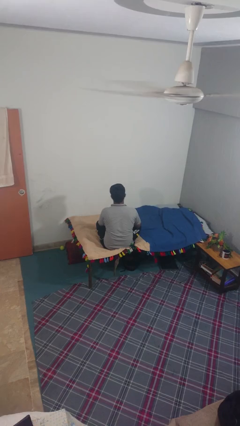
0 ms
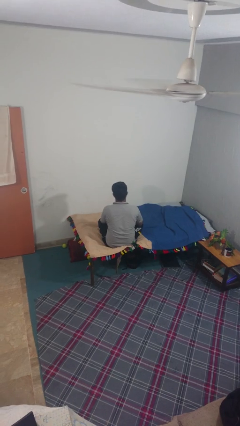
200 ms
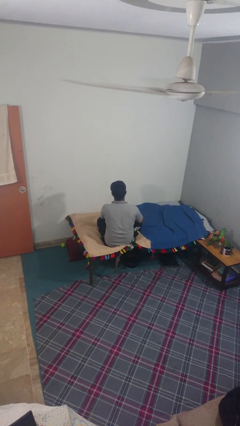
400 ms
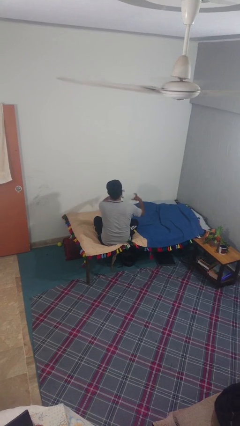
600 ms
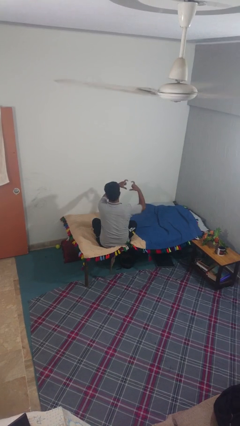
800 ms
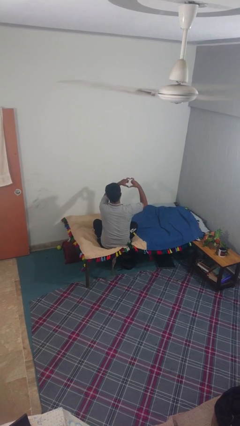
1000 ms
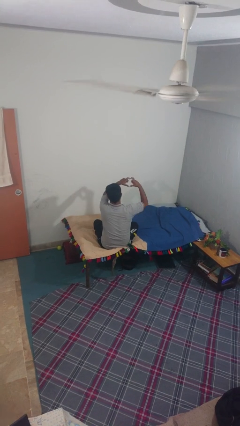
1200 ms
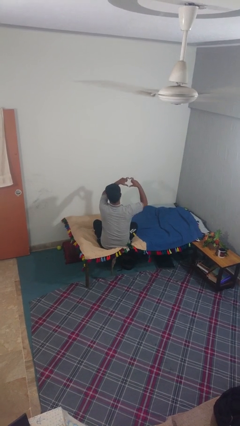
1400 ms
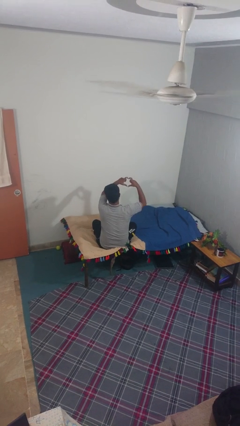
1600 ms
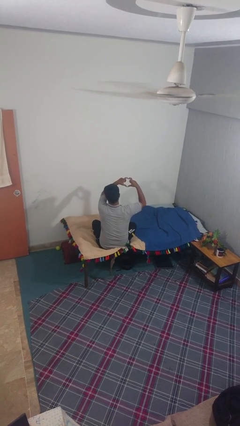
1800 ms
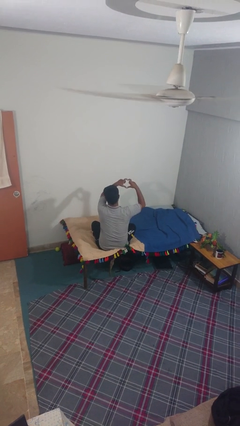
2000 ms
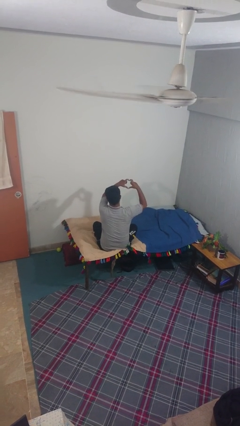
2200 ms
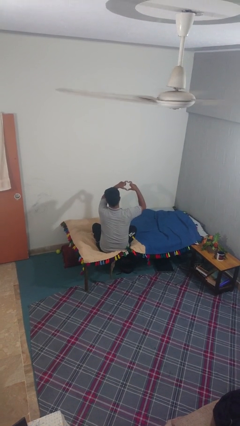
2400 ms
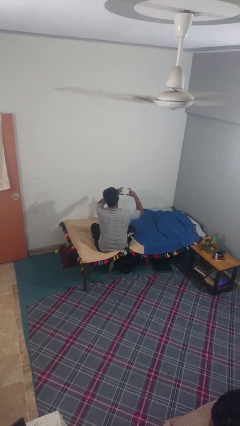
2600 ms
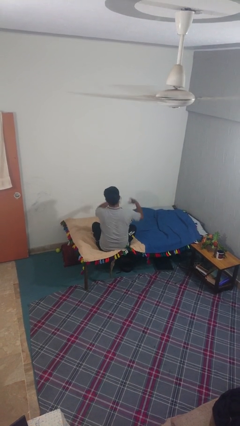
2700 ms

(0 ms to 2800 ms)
person gestures heart

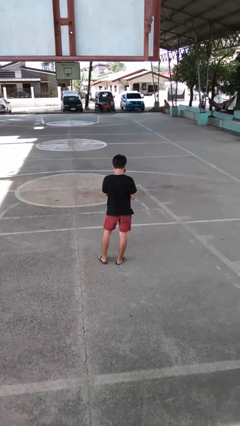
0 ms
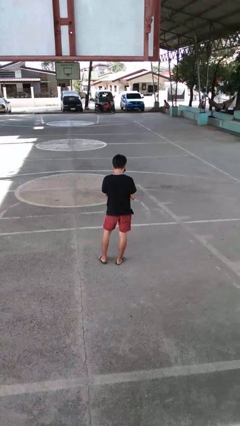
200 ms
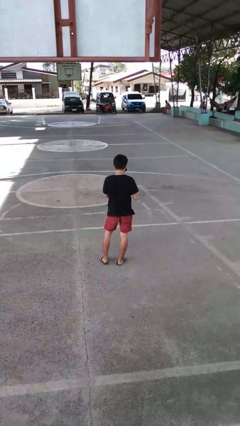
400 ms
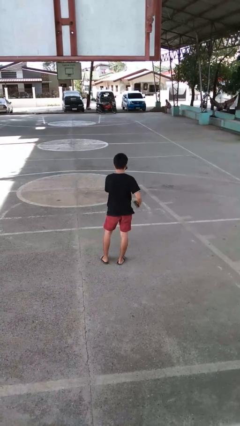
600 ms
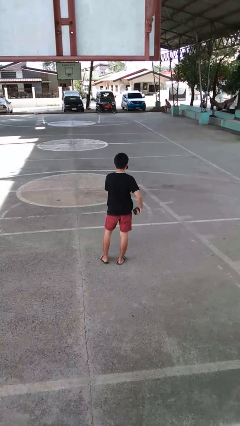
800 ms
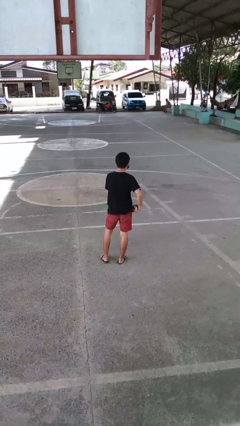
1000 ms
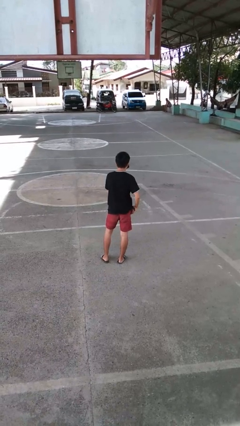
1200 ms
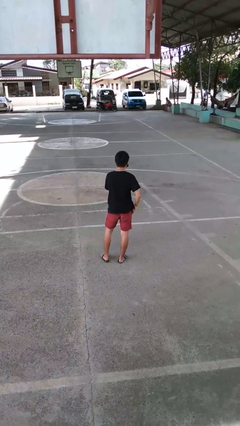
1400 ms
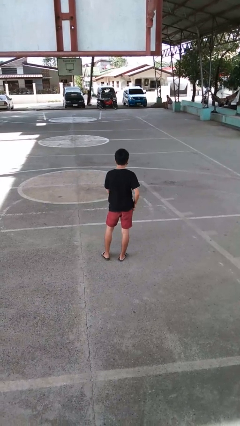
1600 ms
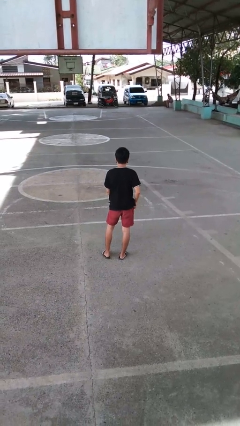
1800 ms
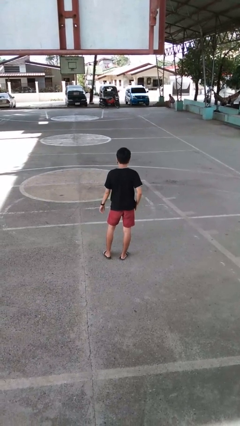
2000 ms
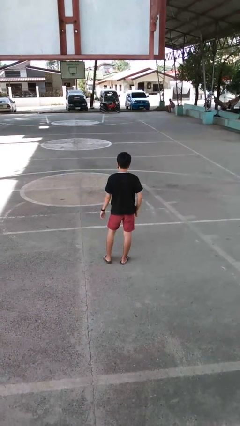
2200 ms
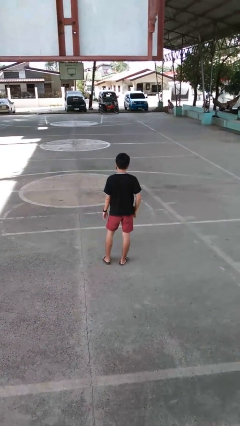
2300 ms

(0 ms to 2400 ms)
person puts phone into pocket

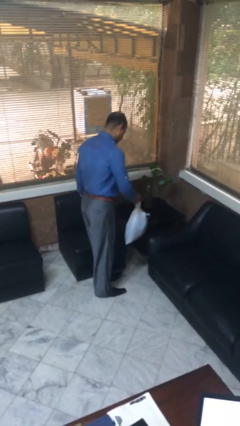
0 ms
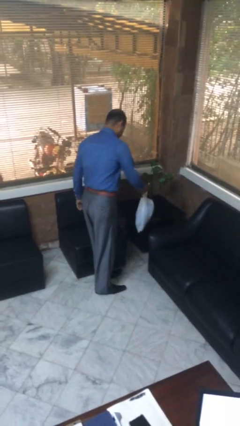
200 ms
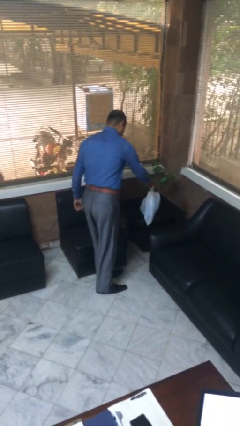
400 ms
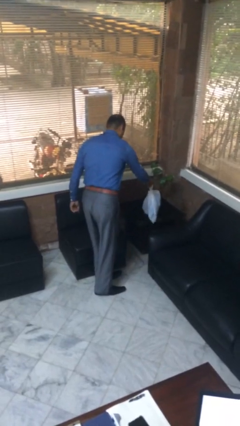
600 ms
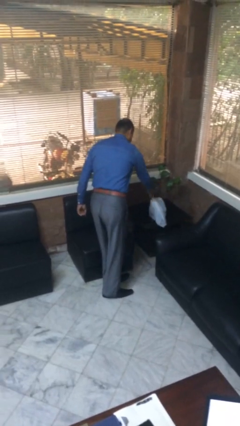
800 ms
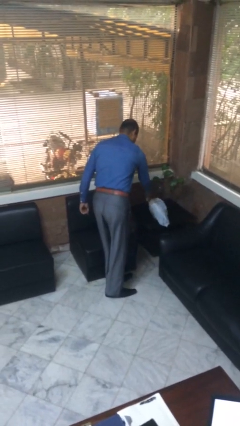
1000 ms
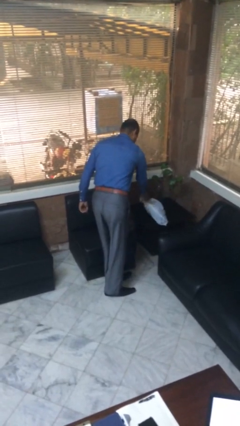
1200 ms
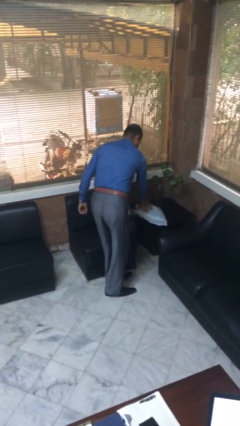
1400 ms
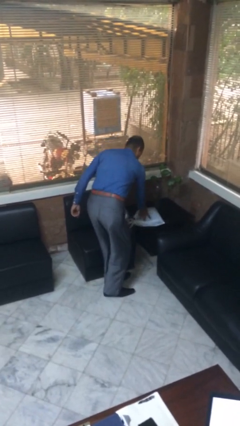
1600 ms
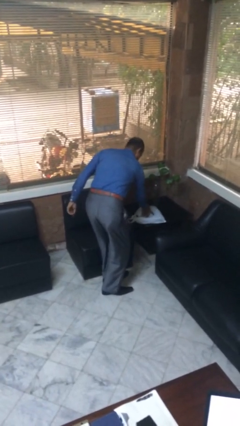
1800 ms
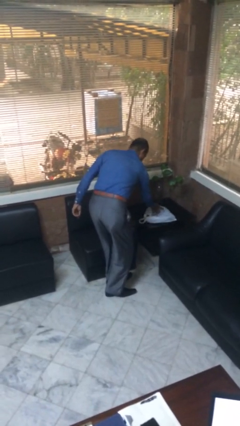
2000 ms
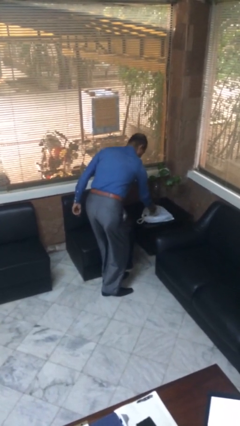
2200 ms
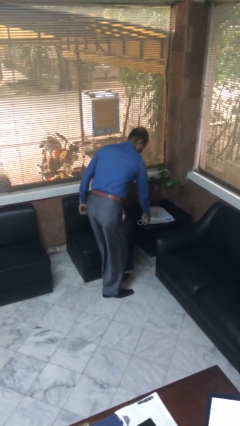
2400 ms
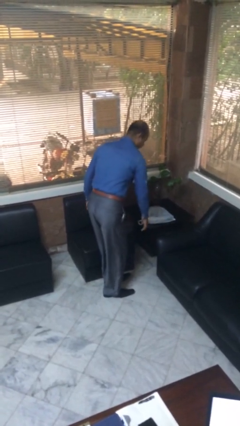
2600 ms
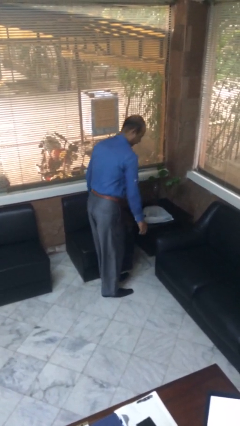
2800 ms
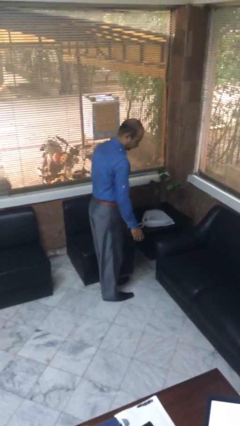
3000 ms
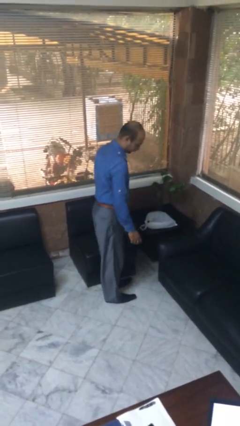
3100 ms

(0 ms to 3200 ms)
person puts down object on table

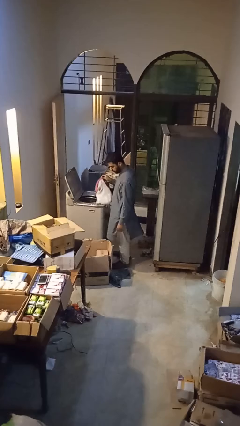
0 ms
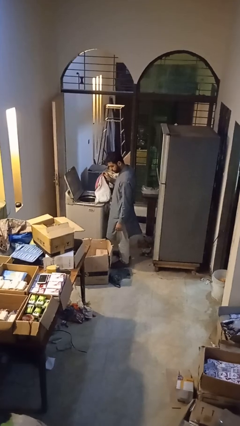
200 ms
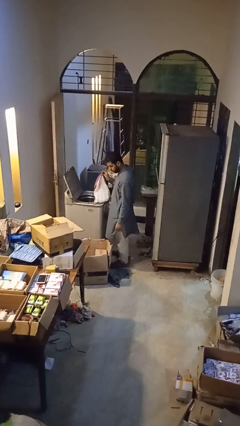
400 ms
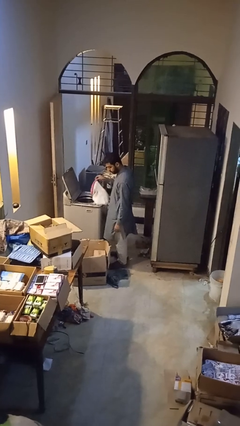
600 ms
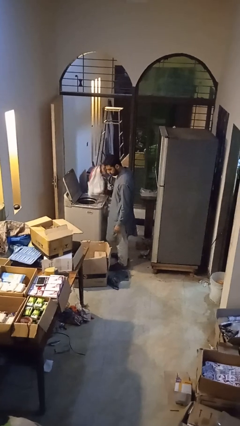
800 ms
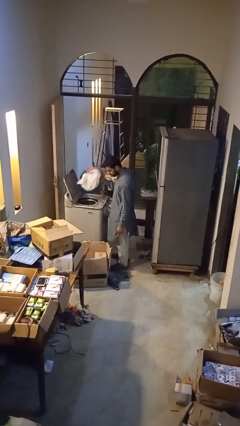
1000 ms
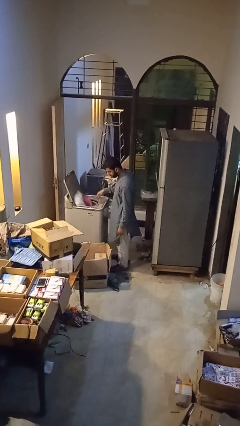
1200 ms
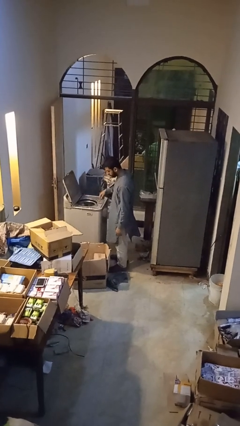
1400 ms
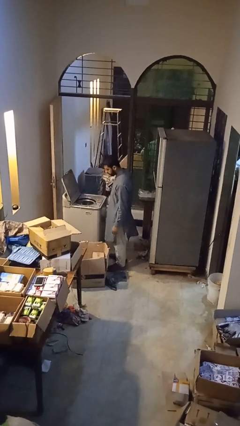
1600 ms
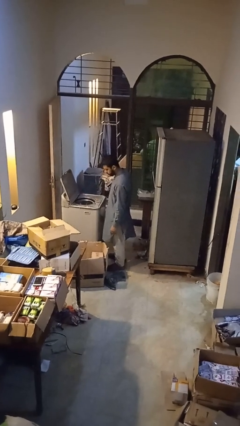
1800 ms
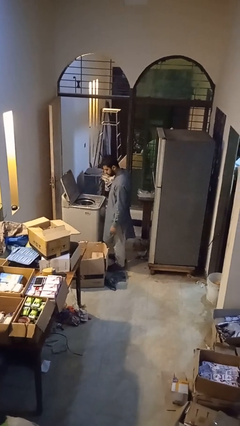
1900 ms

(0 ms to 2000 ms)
person loads clotheswasher

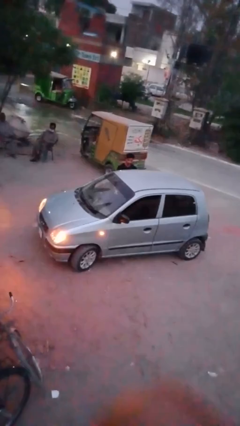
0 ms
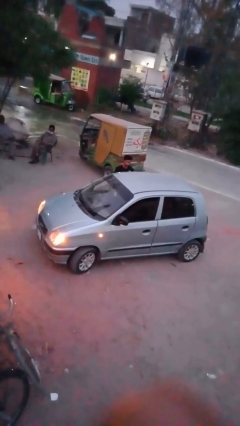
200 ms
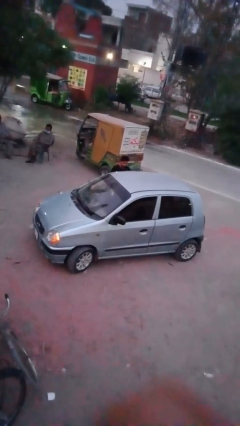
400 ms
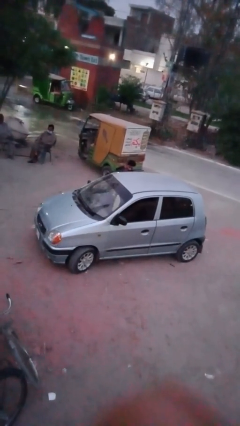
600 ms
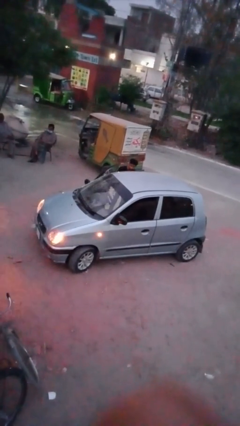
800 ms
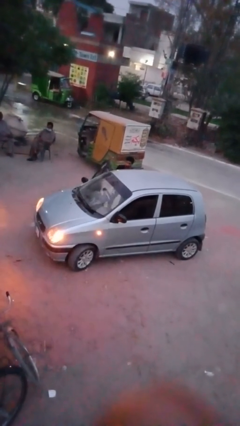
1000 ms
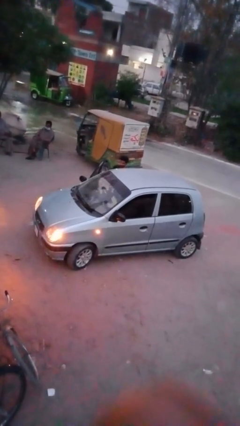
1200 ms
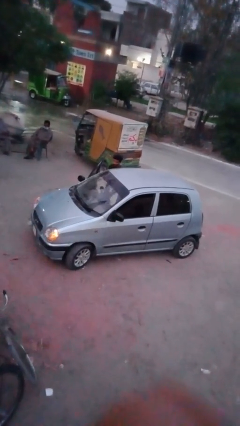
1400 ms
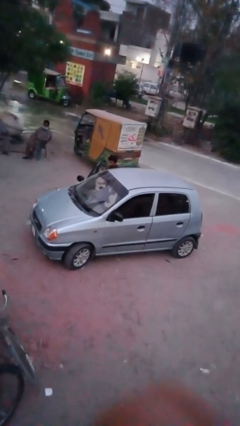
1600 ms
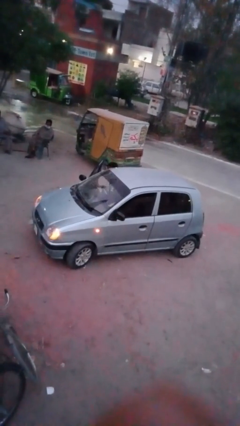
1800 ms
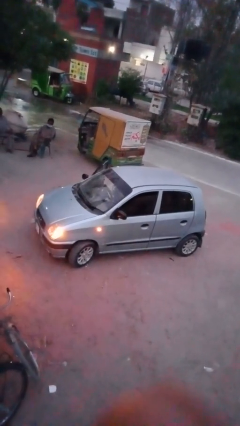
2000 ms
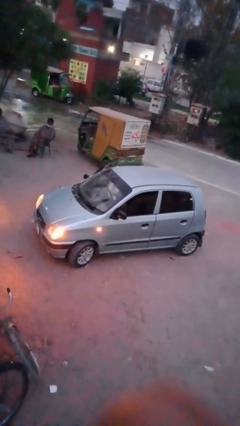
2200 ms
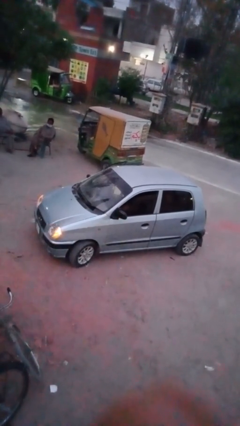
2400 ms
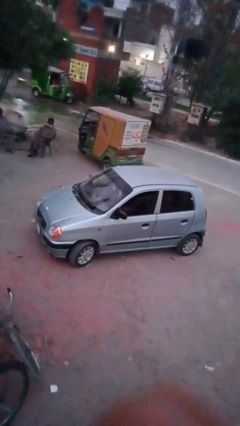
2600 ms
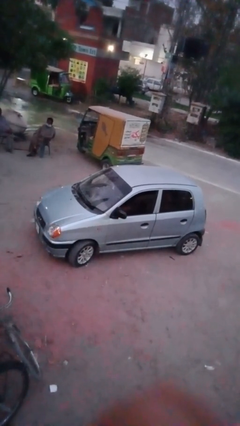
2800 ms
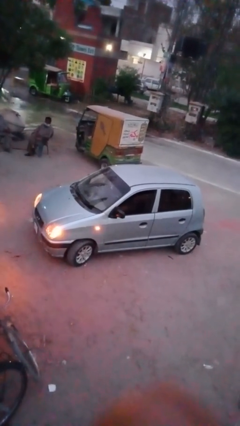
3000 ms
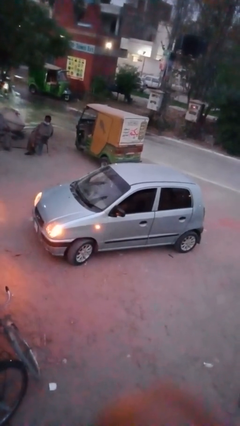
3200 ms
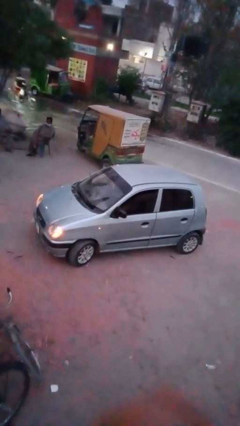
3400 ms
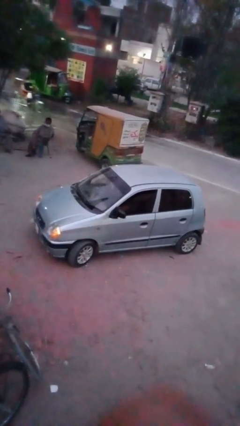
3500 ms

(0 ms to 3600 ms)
car picks up person

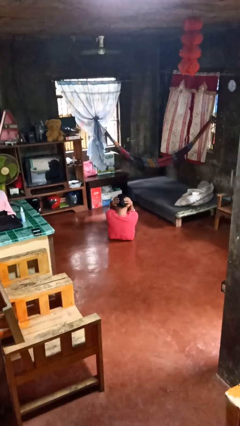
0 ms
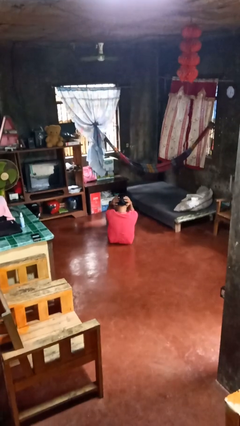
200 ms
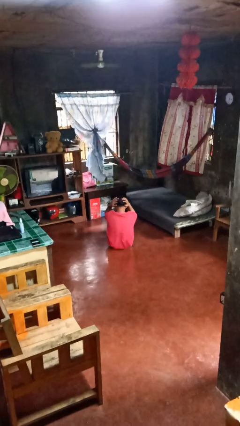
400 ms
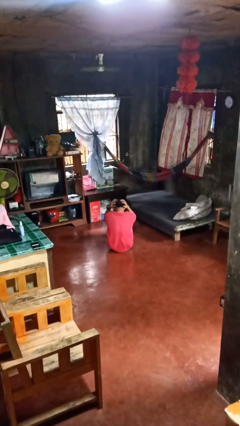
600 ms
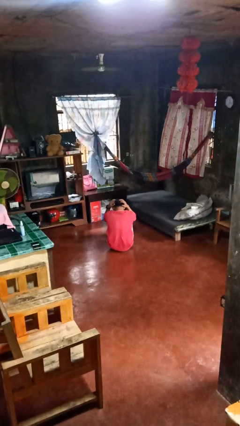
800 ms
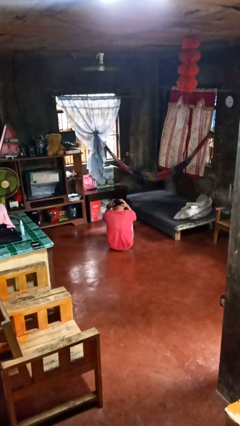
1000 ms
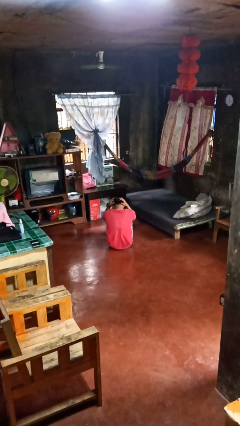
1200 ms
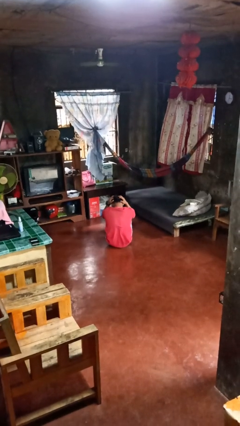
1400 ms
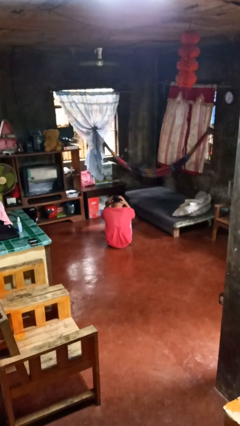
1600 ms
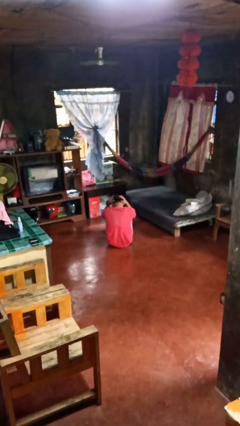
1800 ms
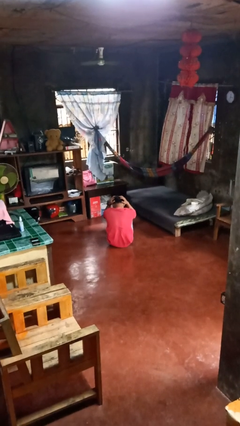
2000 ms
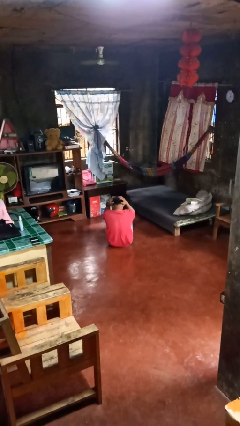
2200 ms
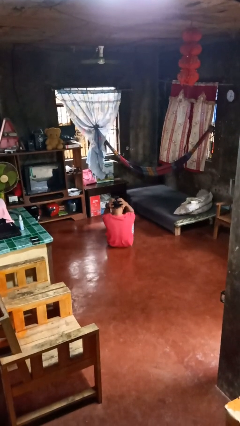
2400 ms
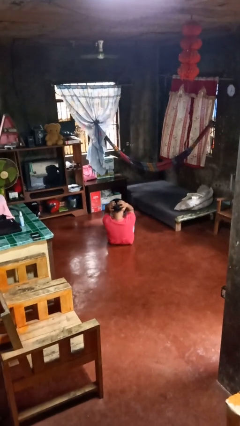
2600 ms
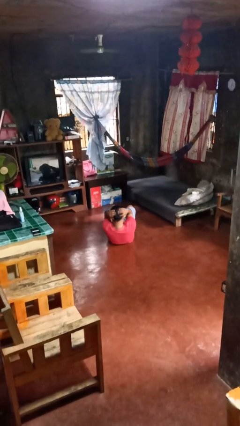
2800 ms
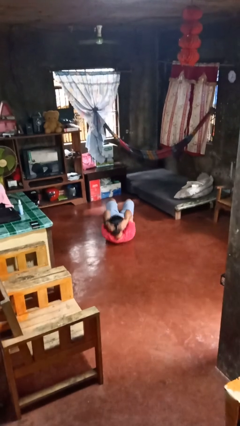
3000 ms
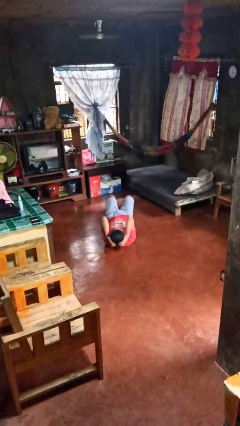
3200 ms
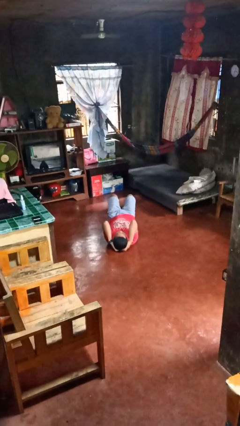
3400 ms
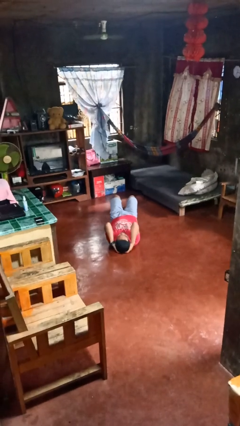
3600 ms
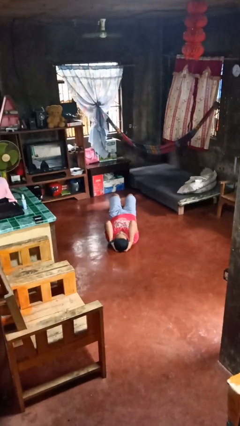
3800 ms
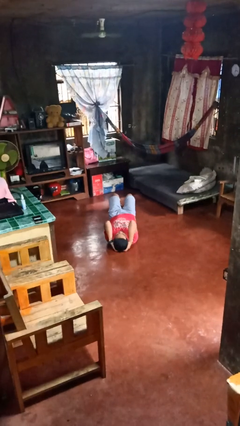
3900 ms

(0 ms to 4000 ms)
person exercises with situp
